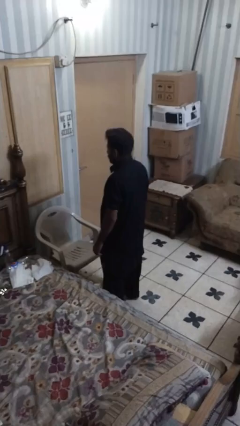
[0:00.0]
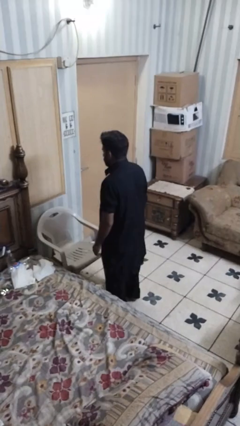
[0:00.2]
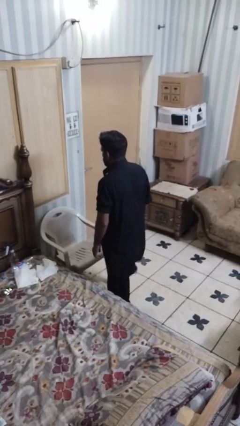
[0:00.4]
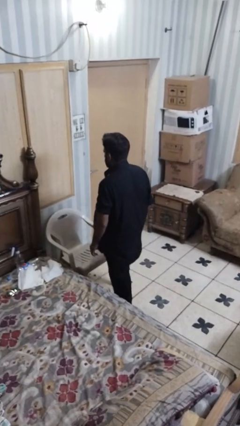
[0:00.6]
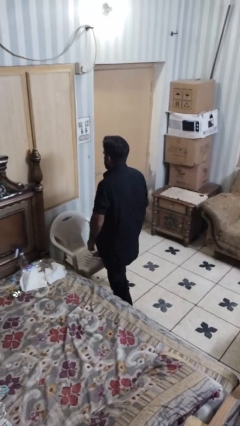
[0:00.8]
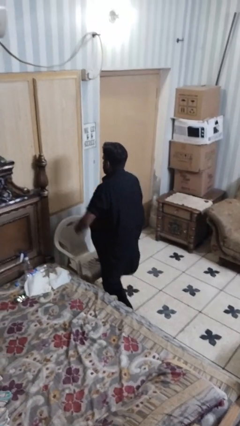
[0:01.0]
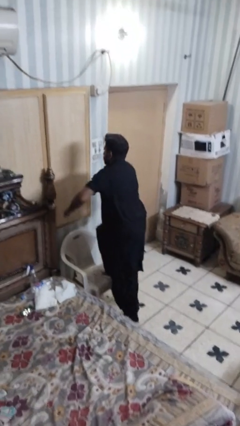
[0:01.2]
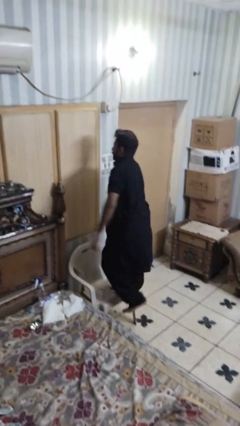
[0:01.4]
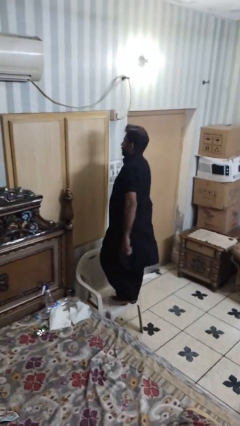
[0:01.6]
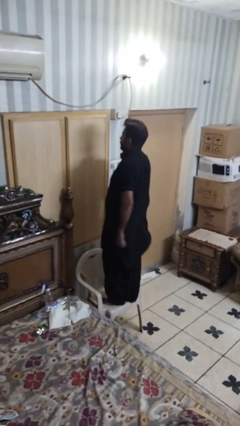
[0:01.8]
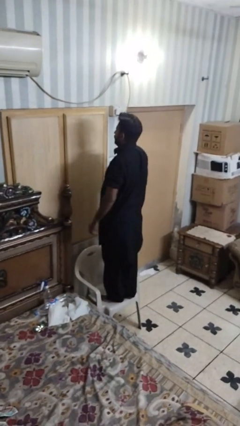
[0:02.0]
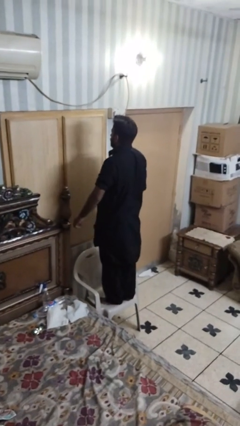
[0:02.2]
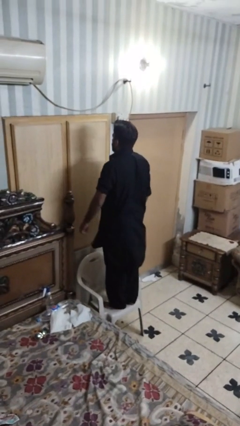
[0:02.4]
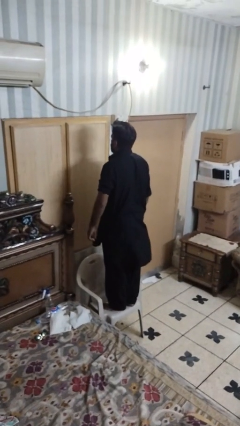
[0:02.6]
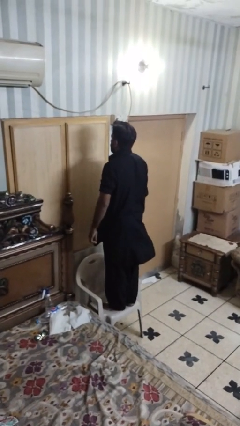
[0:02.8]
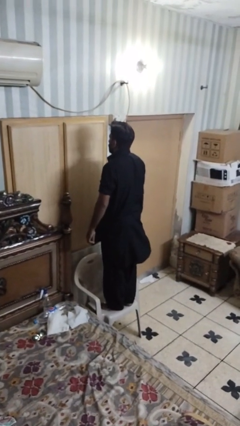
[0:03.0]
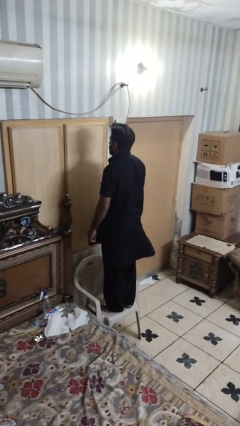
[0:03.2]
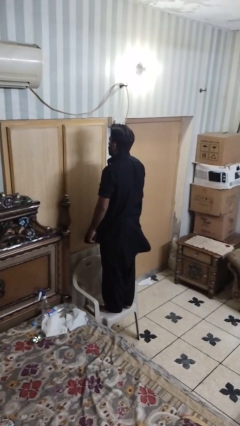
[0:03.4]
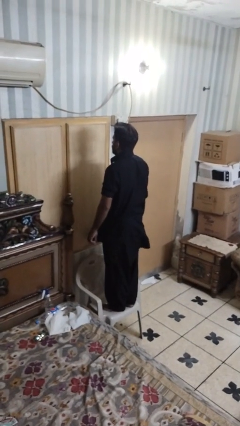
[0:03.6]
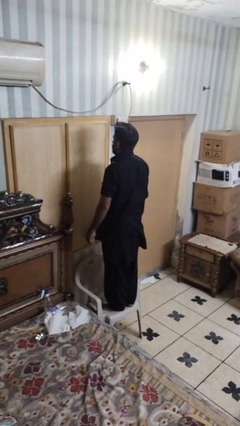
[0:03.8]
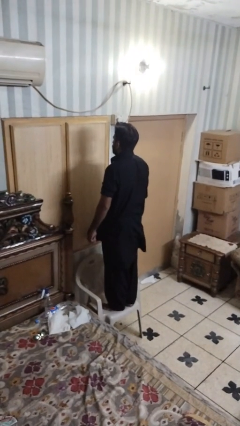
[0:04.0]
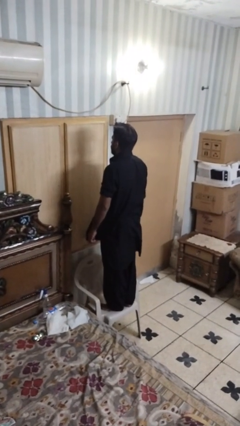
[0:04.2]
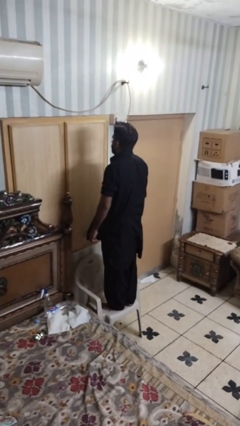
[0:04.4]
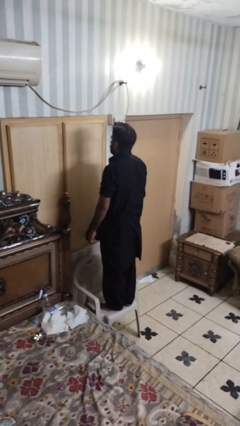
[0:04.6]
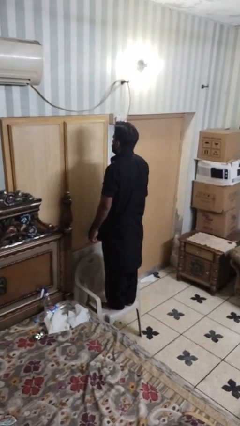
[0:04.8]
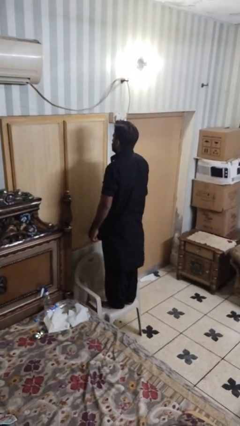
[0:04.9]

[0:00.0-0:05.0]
person climbs on chair

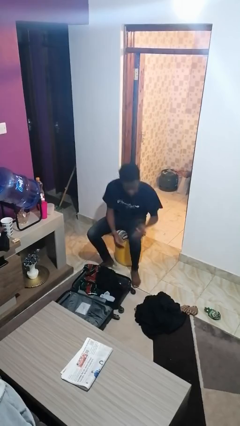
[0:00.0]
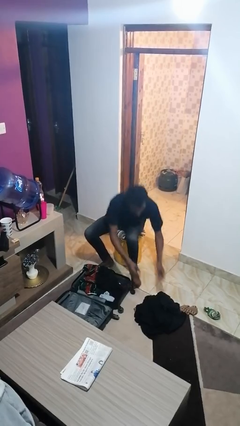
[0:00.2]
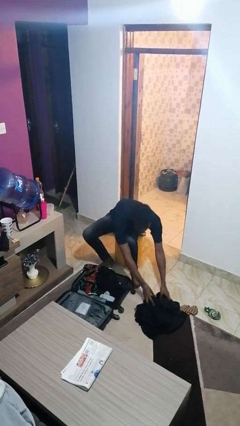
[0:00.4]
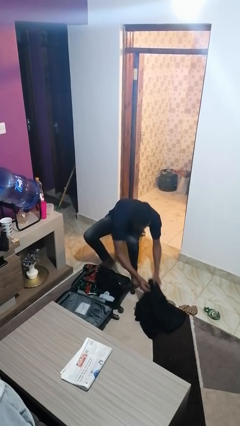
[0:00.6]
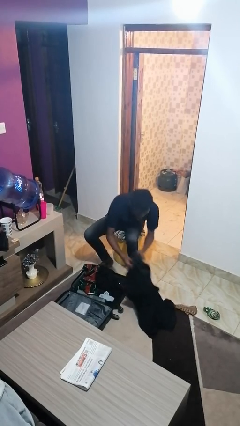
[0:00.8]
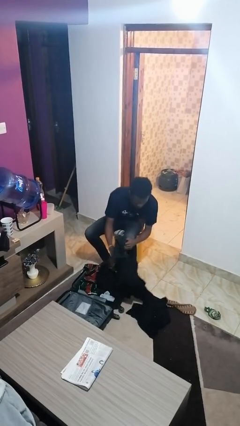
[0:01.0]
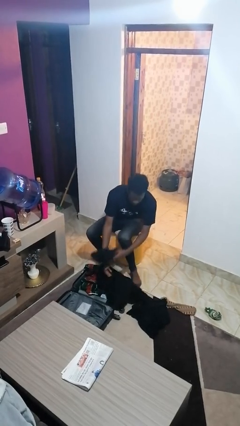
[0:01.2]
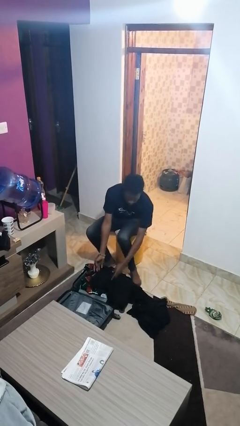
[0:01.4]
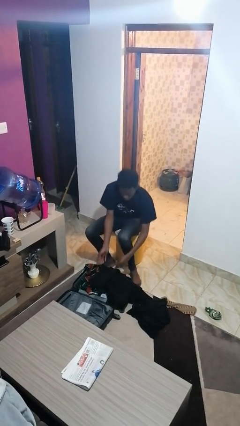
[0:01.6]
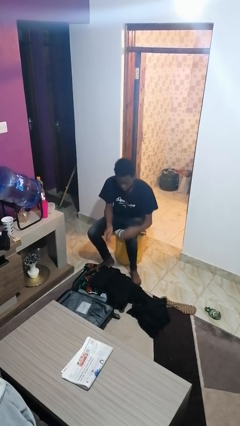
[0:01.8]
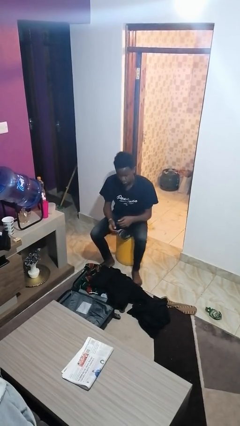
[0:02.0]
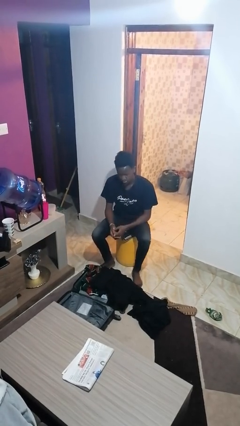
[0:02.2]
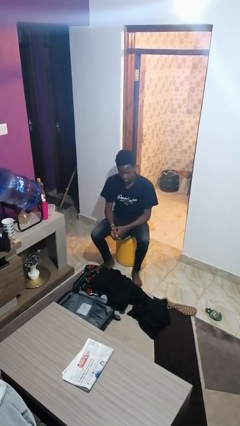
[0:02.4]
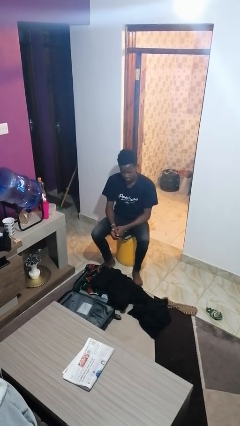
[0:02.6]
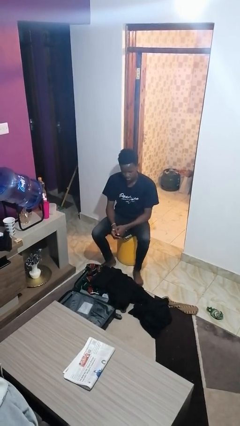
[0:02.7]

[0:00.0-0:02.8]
person loads clothes into suitcase

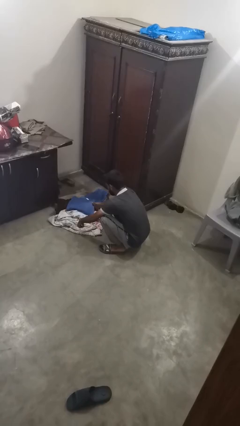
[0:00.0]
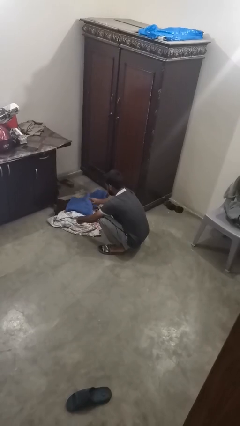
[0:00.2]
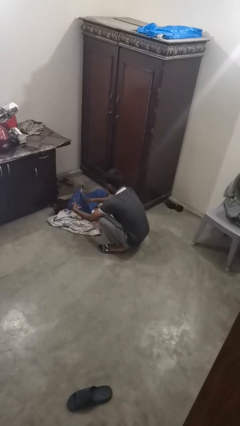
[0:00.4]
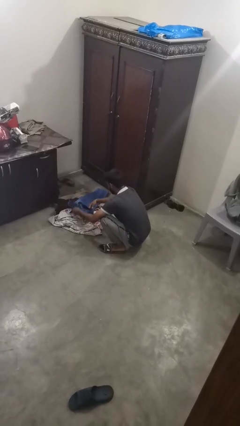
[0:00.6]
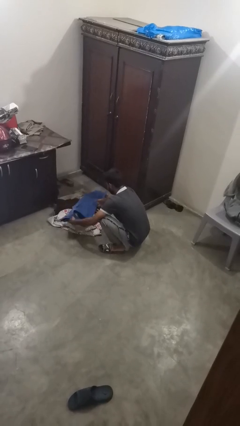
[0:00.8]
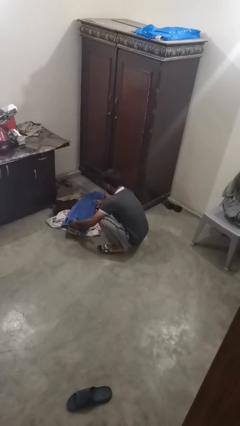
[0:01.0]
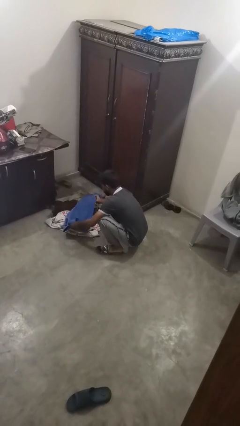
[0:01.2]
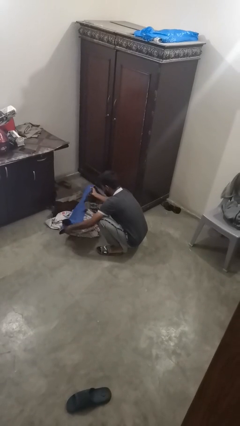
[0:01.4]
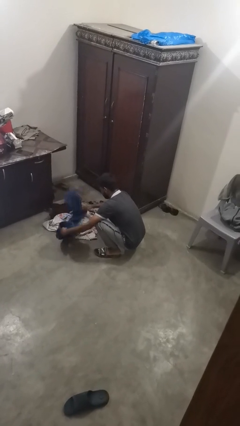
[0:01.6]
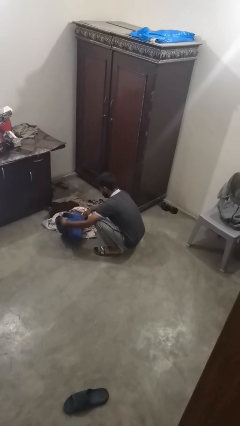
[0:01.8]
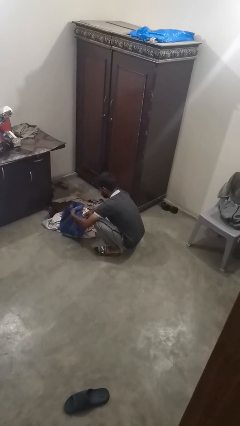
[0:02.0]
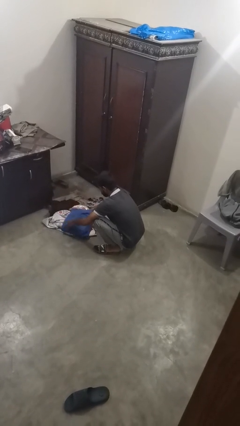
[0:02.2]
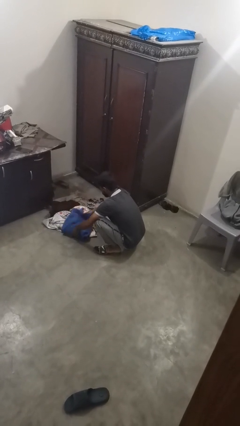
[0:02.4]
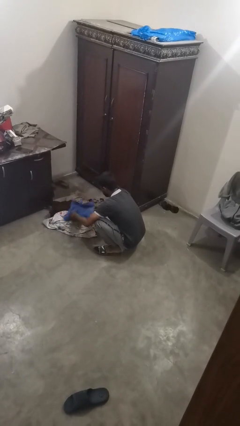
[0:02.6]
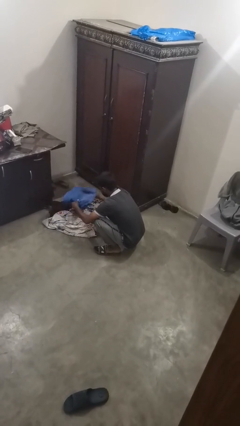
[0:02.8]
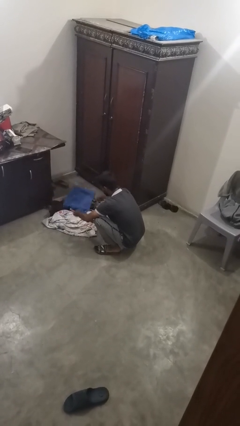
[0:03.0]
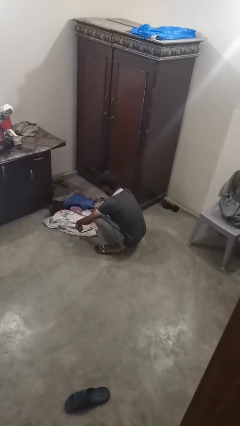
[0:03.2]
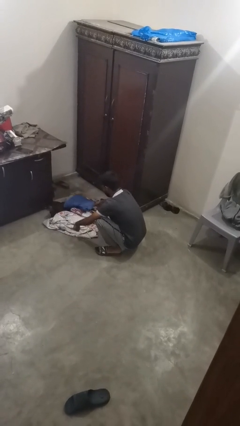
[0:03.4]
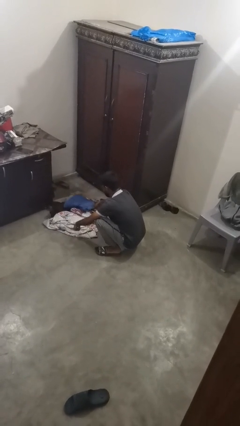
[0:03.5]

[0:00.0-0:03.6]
person folds pants

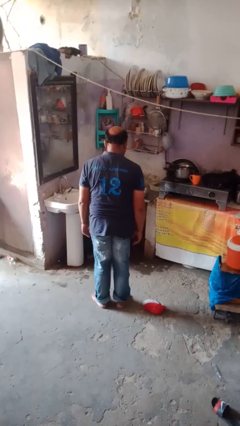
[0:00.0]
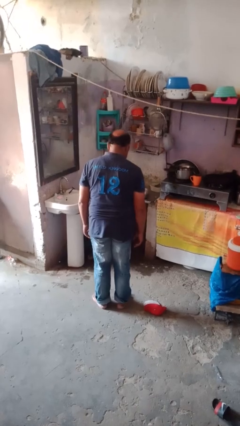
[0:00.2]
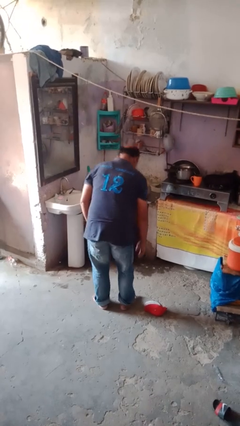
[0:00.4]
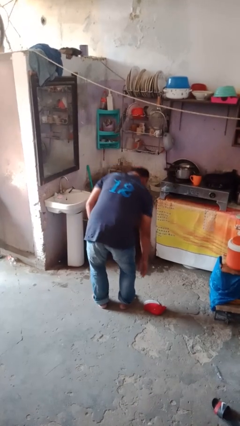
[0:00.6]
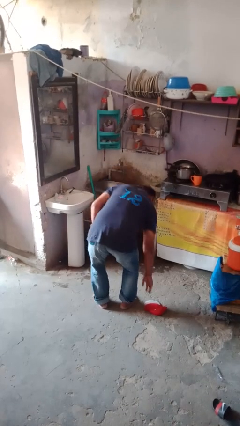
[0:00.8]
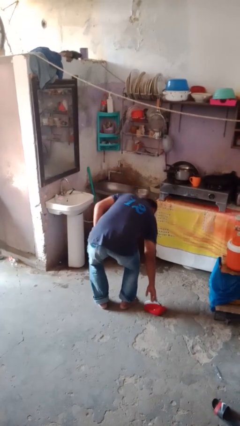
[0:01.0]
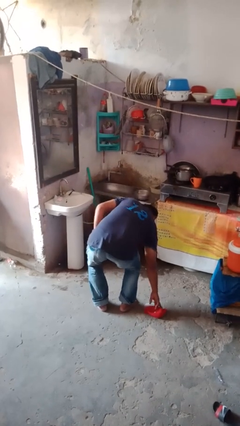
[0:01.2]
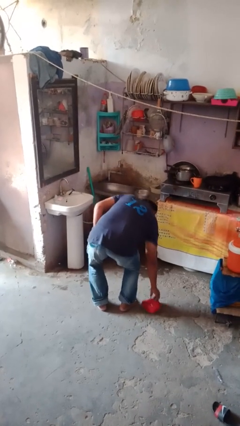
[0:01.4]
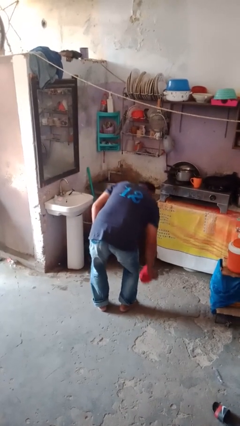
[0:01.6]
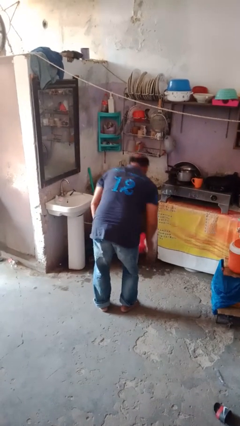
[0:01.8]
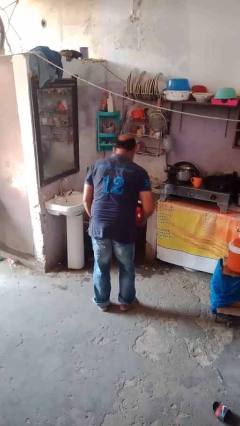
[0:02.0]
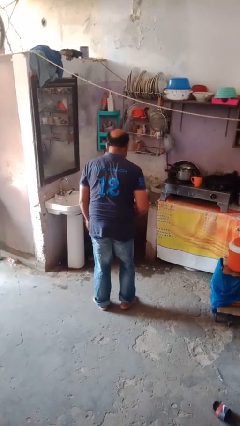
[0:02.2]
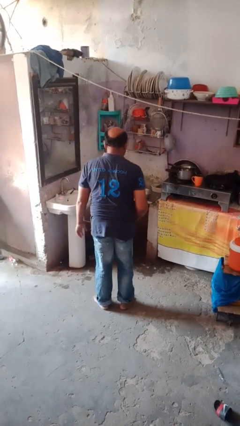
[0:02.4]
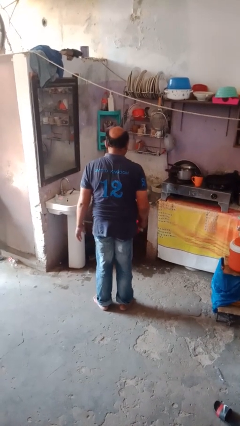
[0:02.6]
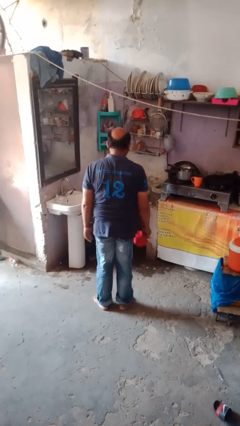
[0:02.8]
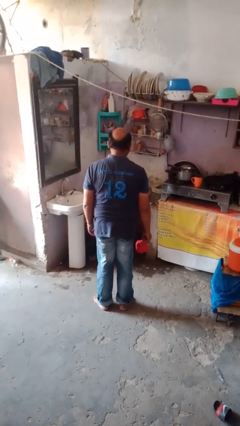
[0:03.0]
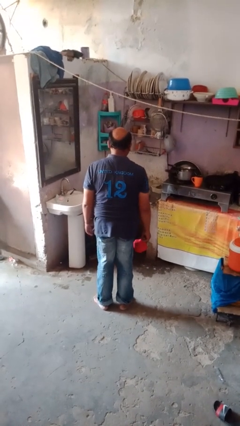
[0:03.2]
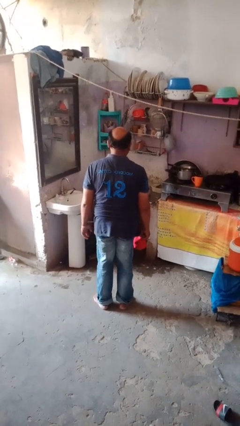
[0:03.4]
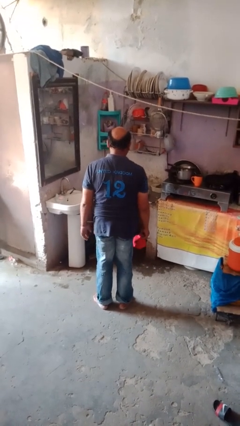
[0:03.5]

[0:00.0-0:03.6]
person picks up object from floor

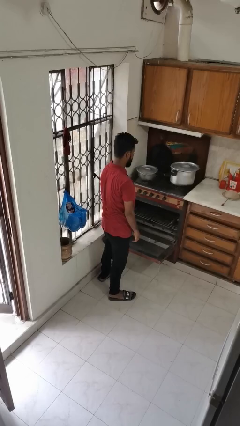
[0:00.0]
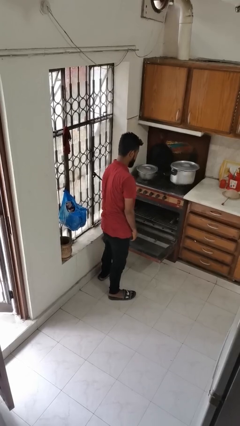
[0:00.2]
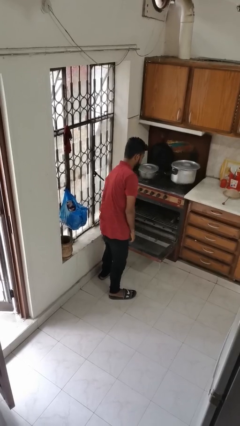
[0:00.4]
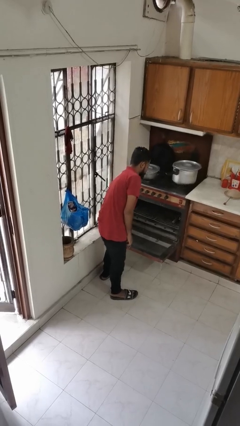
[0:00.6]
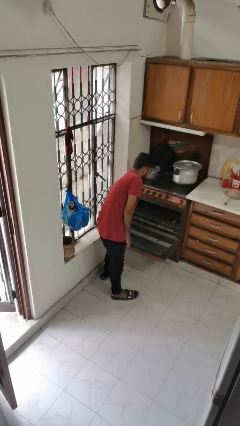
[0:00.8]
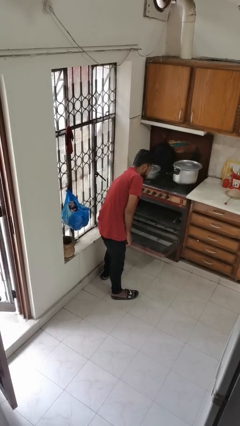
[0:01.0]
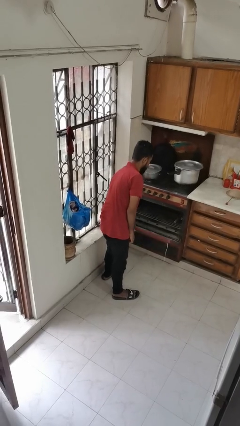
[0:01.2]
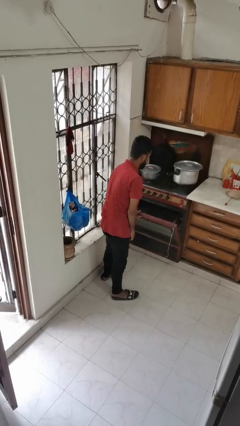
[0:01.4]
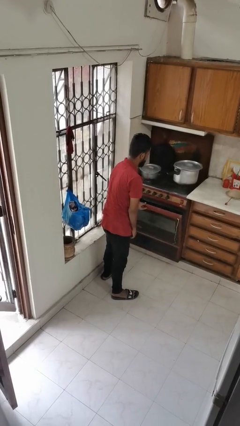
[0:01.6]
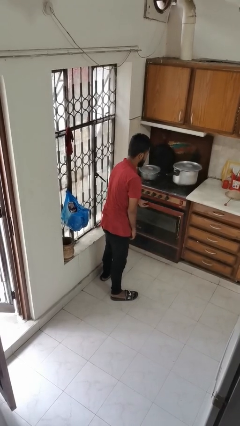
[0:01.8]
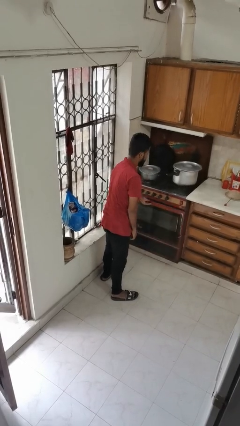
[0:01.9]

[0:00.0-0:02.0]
person closes oven door
